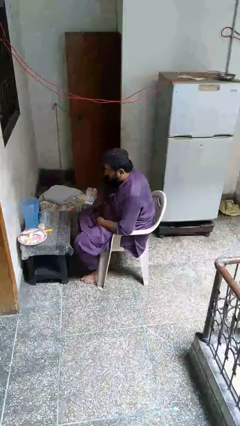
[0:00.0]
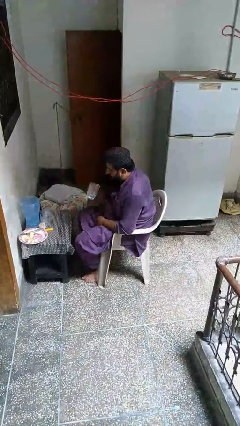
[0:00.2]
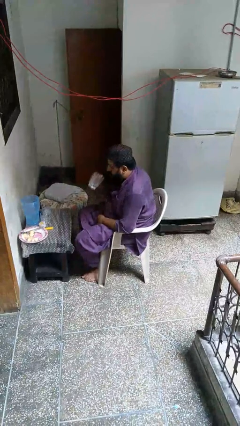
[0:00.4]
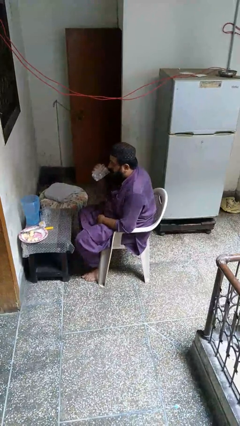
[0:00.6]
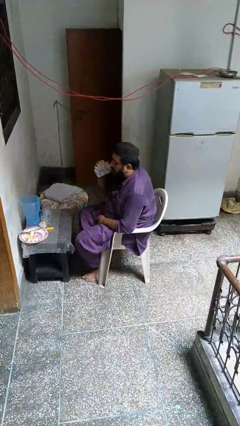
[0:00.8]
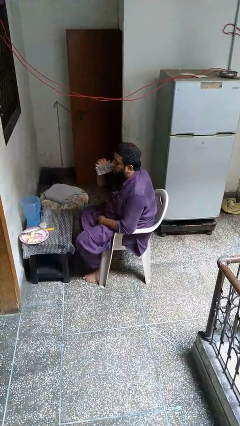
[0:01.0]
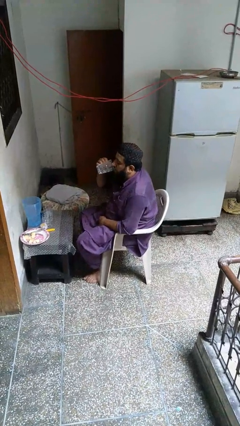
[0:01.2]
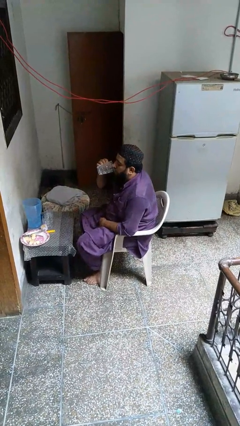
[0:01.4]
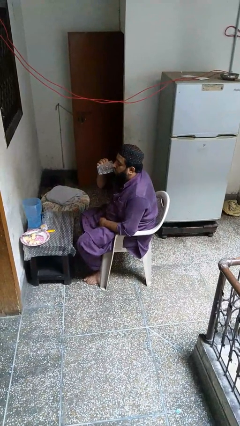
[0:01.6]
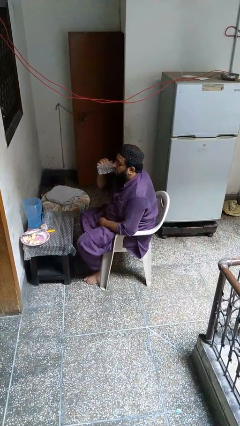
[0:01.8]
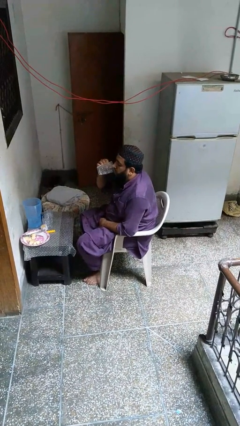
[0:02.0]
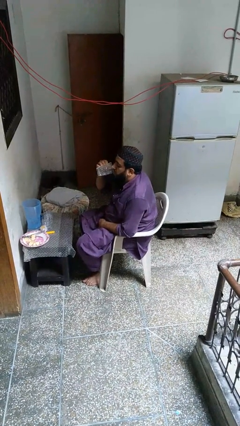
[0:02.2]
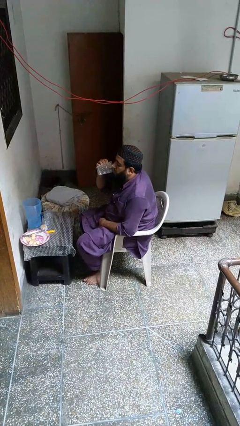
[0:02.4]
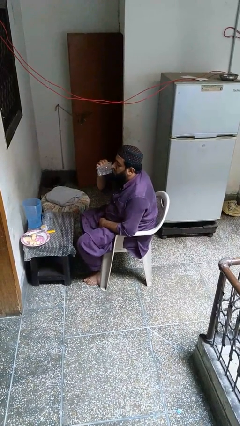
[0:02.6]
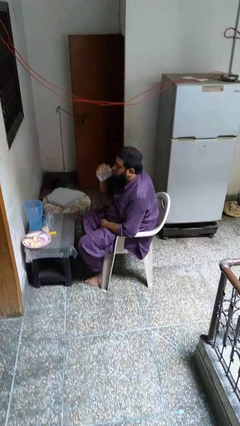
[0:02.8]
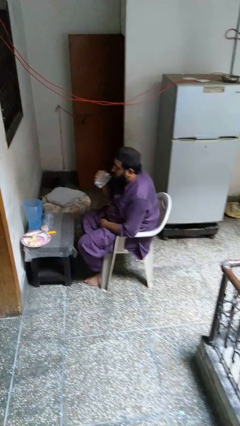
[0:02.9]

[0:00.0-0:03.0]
person drinks from mug

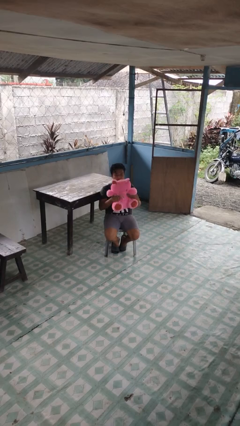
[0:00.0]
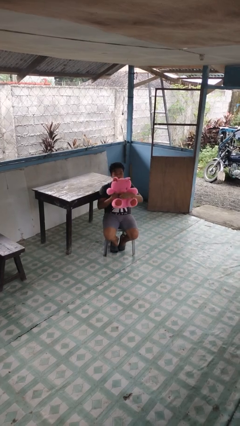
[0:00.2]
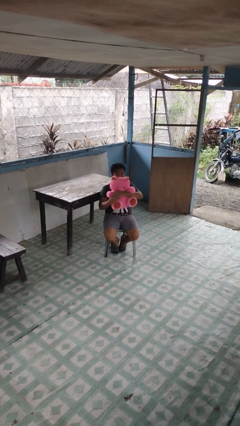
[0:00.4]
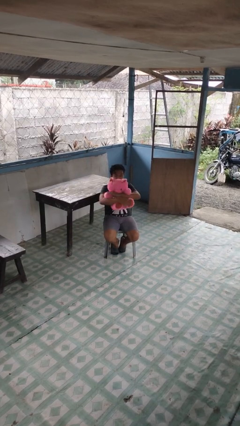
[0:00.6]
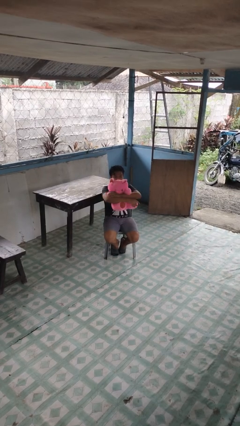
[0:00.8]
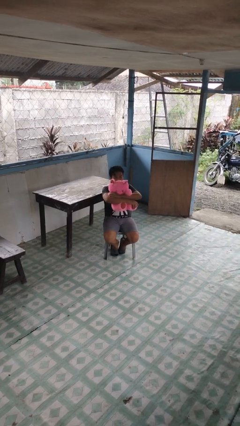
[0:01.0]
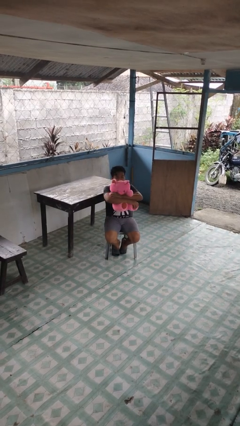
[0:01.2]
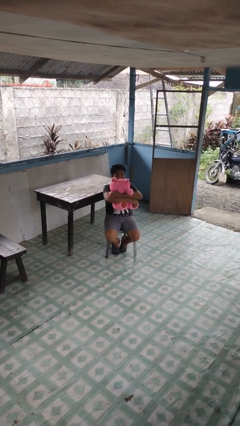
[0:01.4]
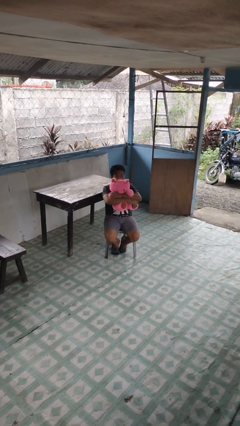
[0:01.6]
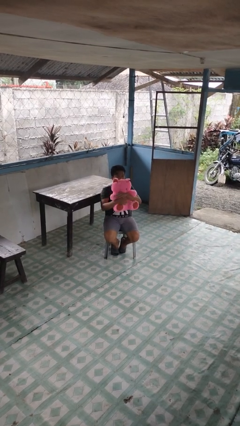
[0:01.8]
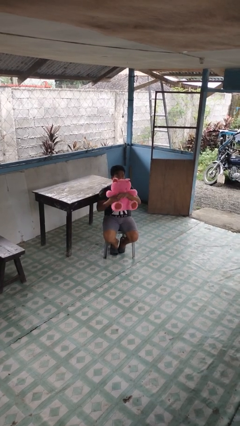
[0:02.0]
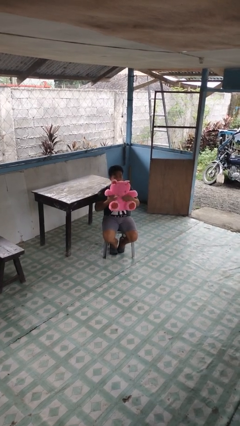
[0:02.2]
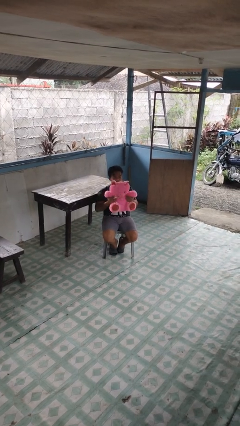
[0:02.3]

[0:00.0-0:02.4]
person hugs stuffed animal

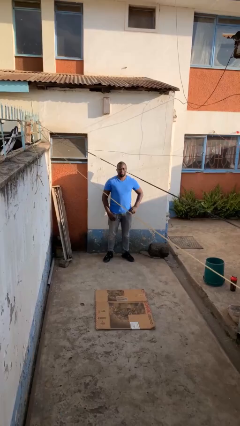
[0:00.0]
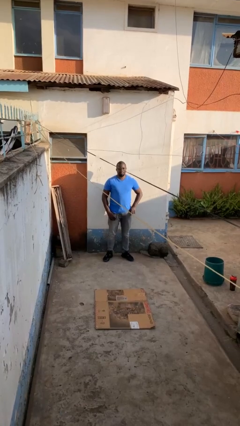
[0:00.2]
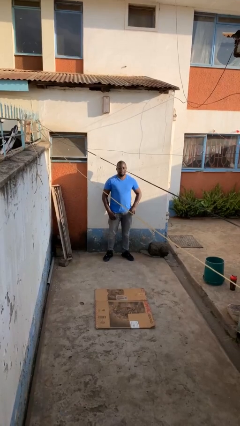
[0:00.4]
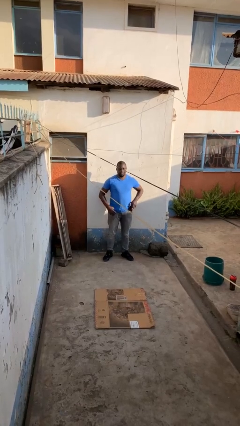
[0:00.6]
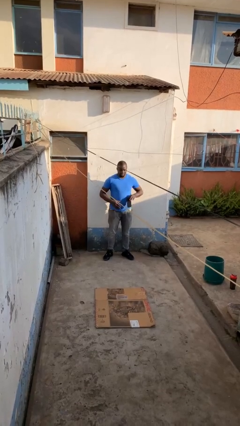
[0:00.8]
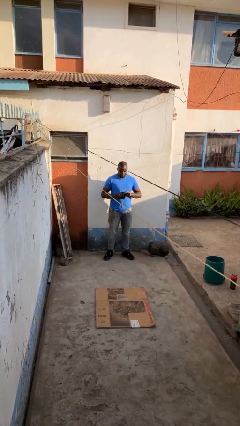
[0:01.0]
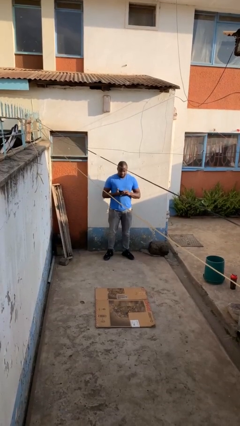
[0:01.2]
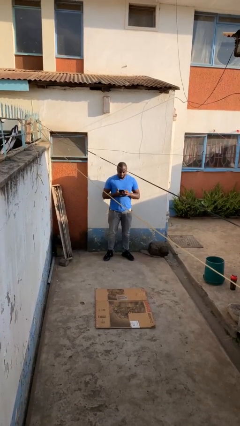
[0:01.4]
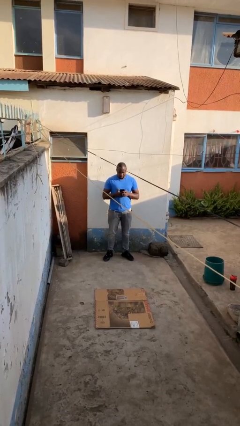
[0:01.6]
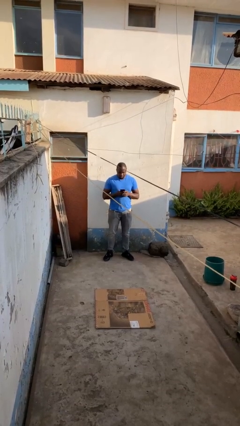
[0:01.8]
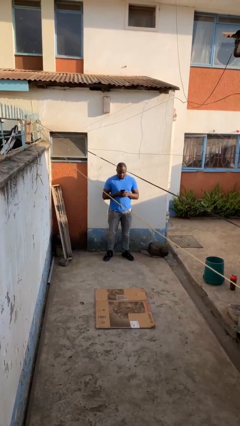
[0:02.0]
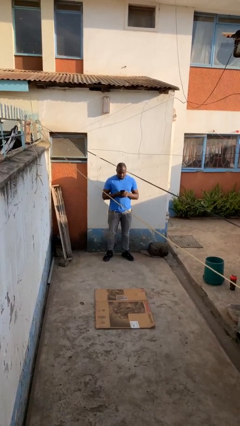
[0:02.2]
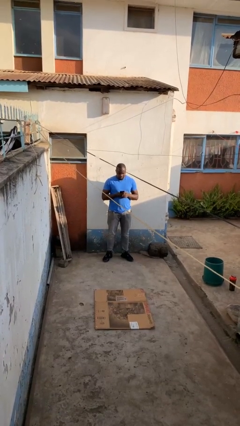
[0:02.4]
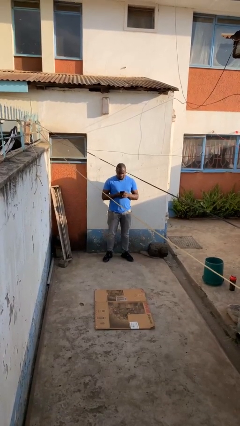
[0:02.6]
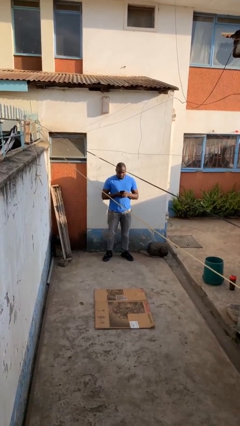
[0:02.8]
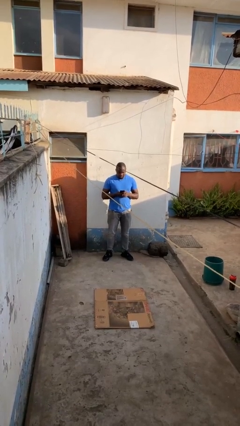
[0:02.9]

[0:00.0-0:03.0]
person takes phone from pocket

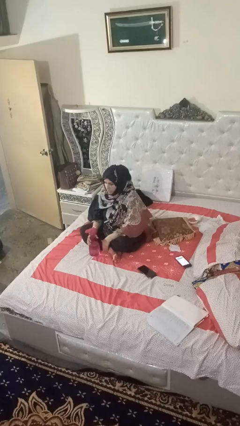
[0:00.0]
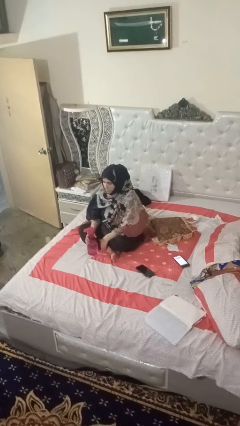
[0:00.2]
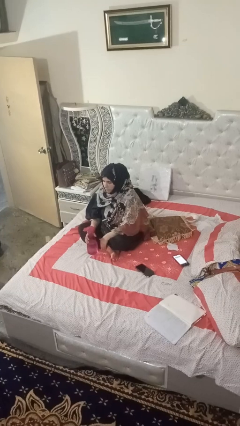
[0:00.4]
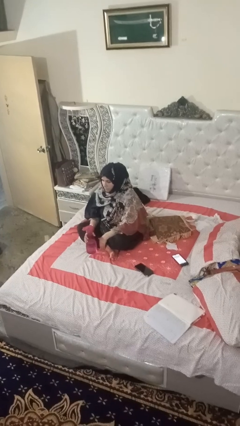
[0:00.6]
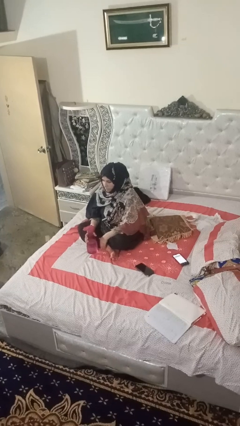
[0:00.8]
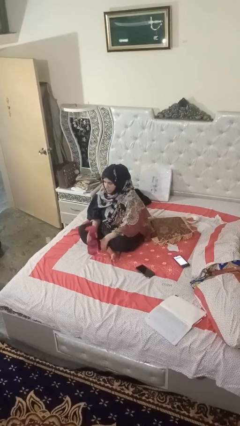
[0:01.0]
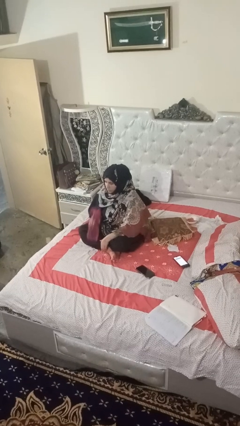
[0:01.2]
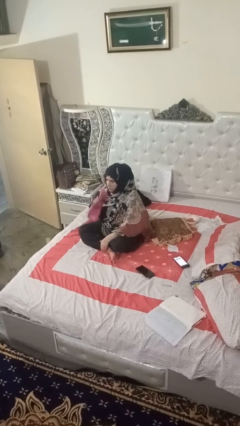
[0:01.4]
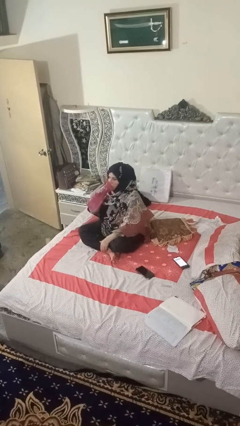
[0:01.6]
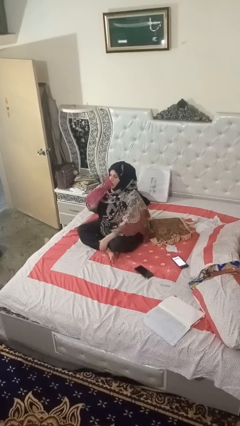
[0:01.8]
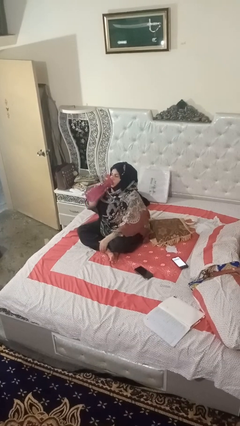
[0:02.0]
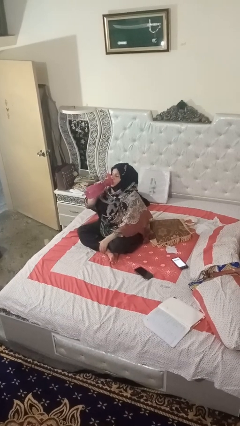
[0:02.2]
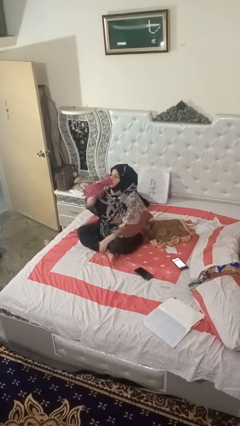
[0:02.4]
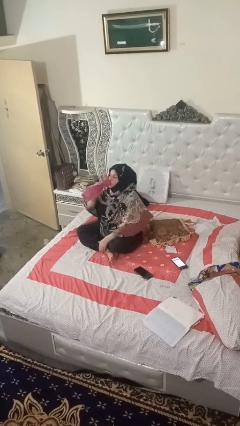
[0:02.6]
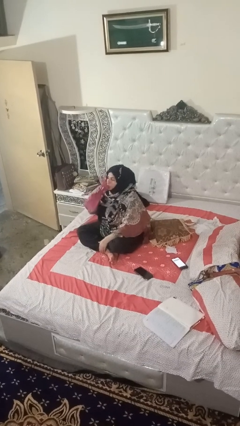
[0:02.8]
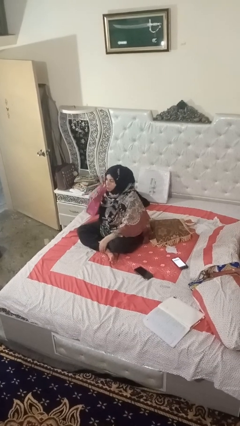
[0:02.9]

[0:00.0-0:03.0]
person drinks from bottle

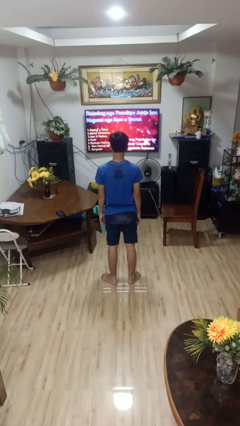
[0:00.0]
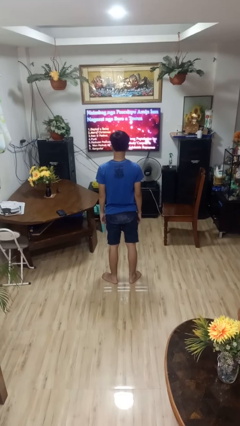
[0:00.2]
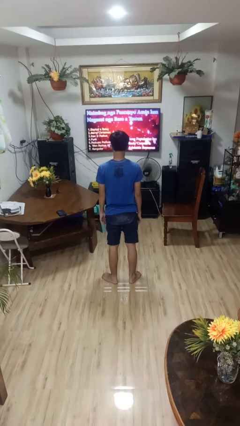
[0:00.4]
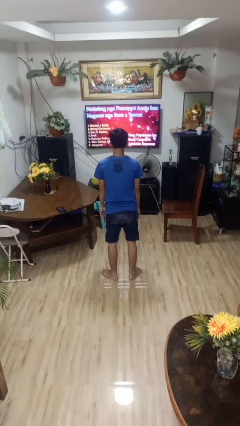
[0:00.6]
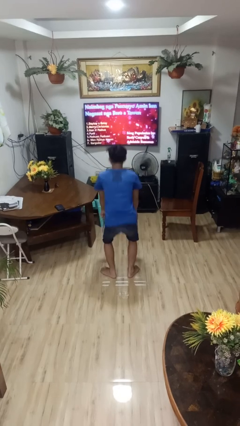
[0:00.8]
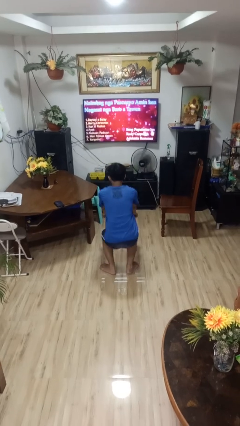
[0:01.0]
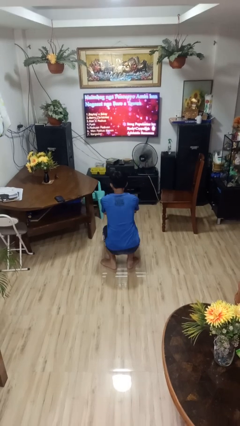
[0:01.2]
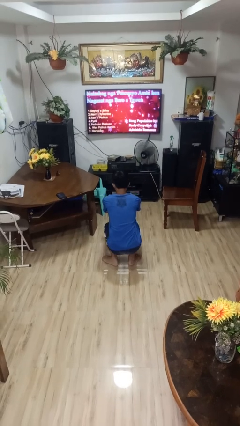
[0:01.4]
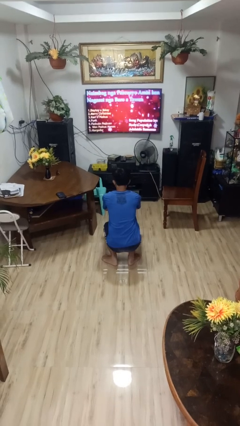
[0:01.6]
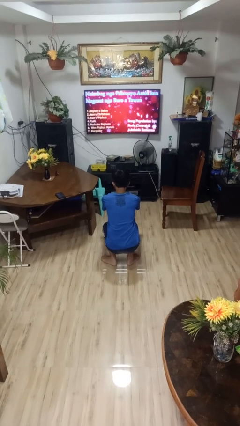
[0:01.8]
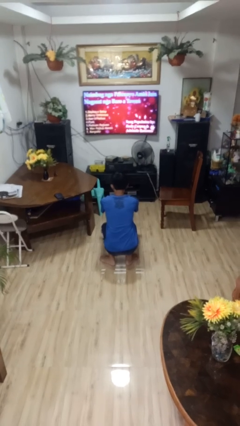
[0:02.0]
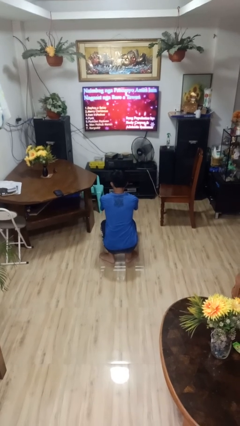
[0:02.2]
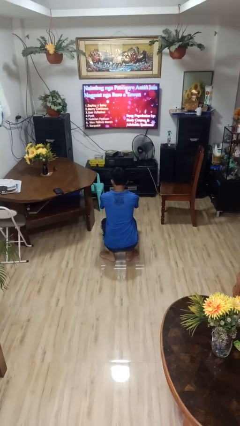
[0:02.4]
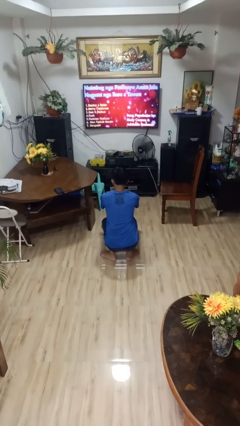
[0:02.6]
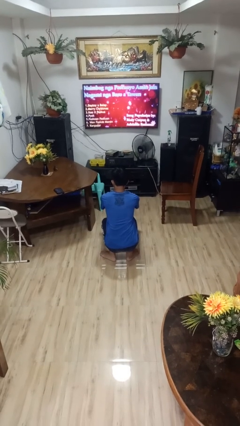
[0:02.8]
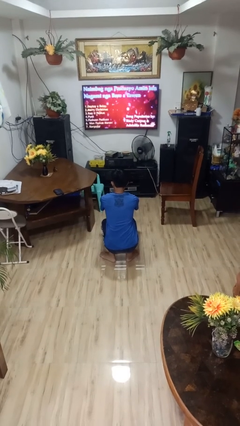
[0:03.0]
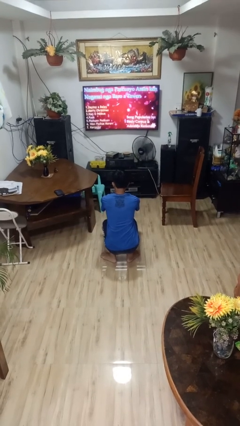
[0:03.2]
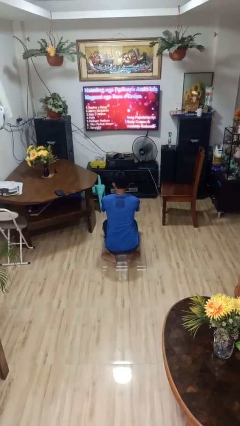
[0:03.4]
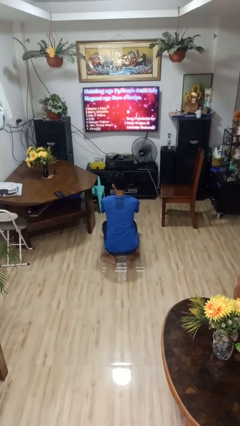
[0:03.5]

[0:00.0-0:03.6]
person squats

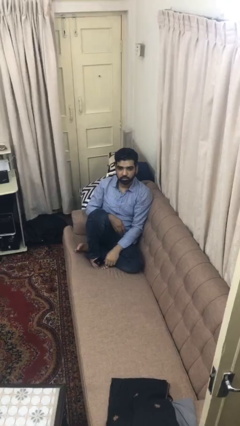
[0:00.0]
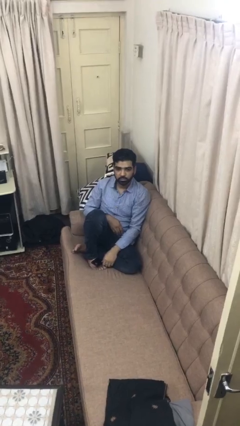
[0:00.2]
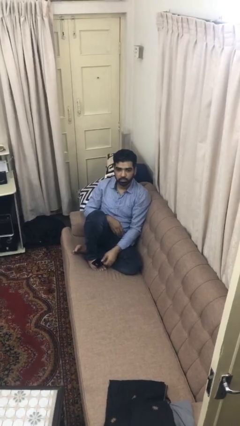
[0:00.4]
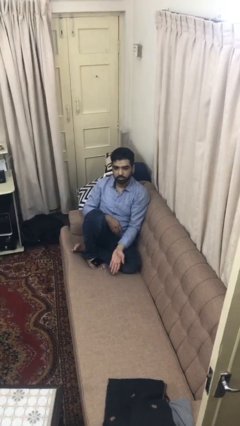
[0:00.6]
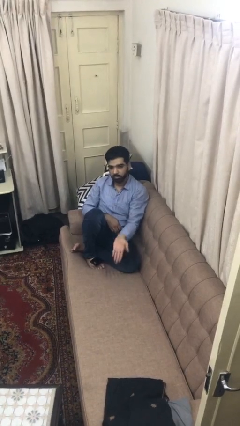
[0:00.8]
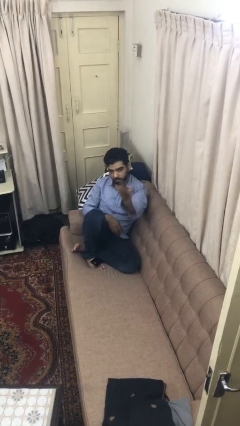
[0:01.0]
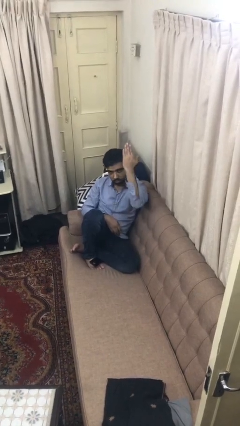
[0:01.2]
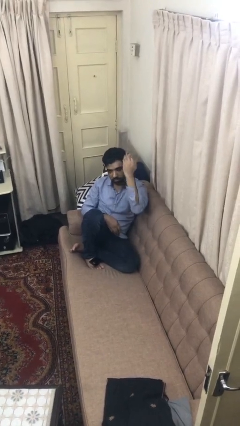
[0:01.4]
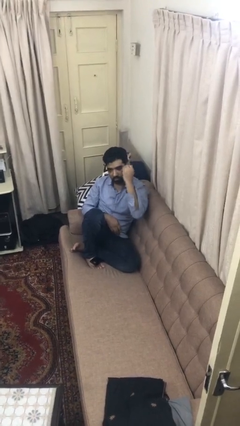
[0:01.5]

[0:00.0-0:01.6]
person gestures swipe up

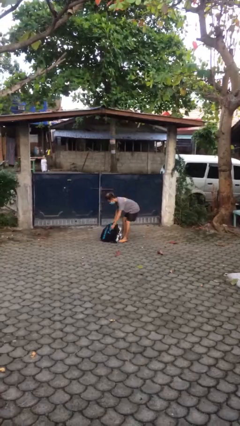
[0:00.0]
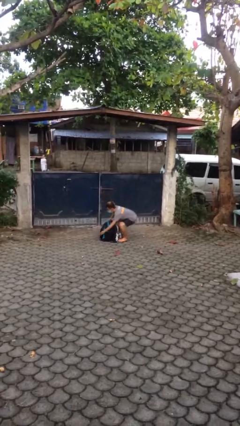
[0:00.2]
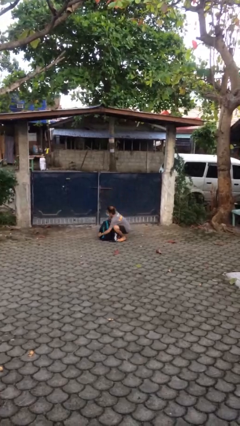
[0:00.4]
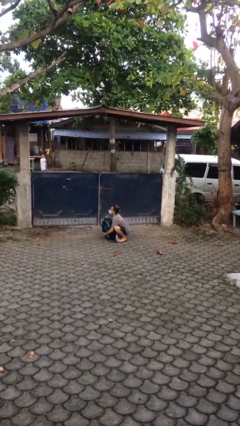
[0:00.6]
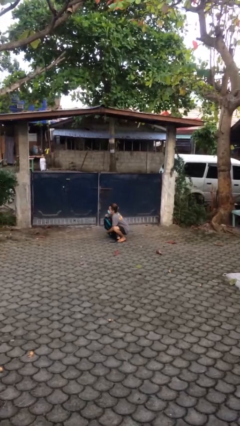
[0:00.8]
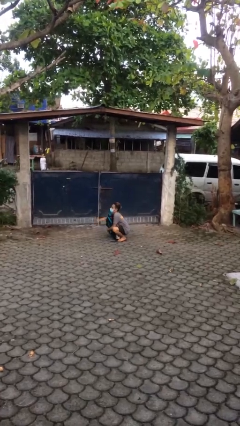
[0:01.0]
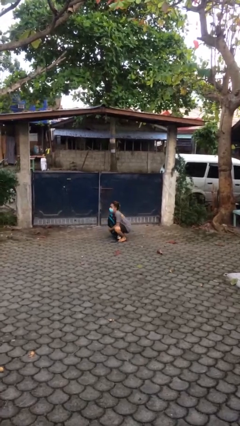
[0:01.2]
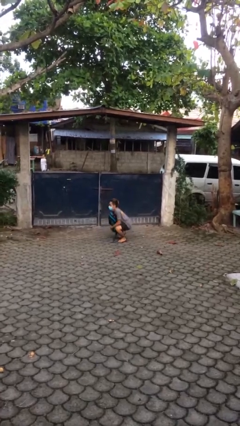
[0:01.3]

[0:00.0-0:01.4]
person picks up object from floor
